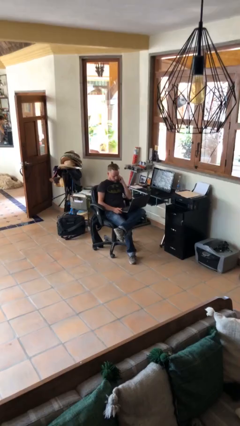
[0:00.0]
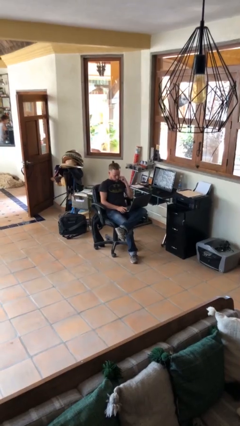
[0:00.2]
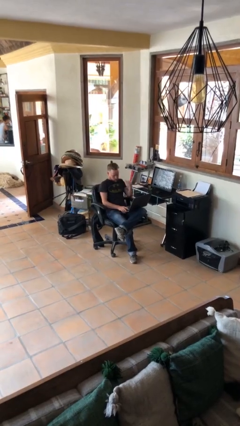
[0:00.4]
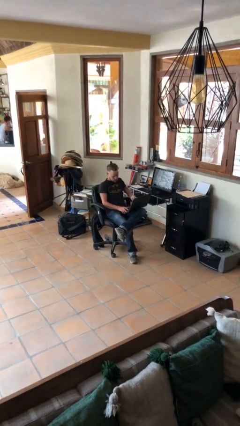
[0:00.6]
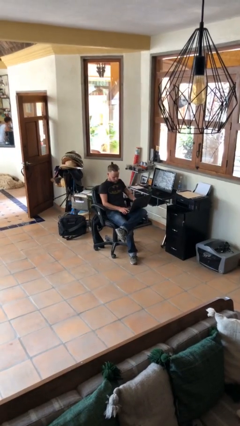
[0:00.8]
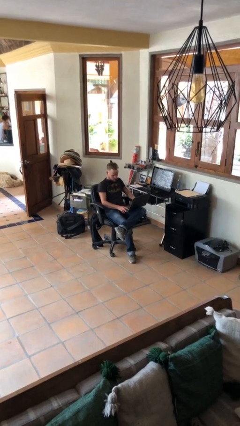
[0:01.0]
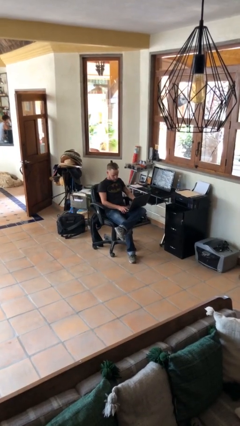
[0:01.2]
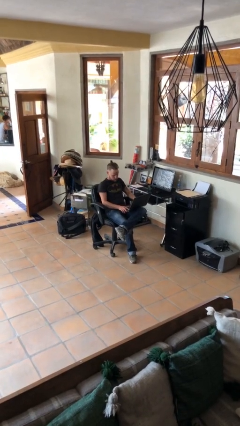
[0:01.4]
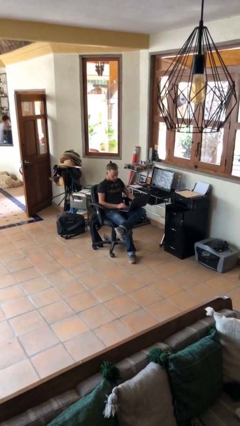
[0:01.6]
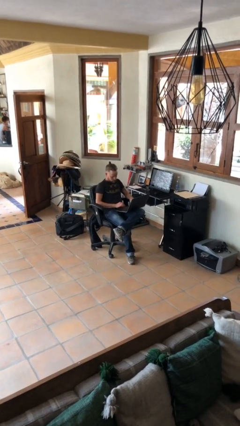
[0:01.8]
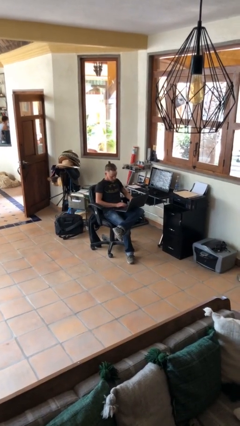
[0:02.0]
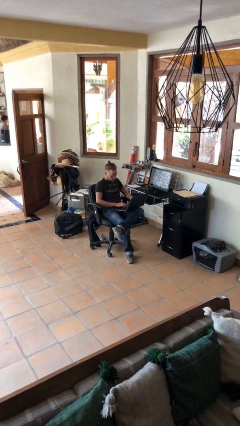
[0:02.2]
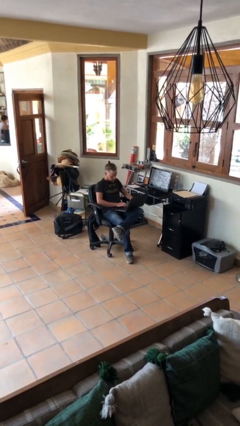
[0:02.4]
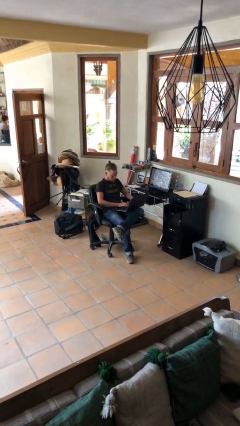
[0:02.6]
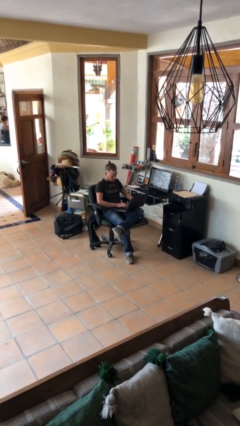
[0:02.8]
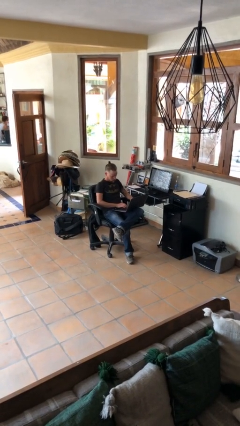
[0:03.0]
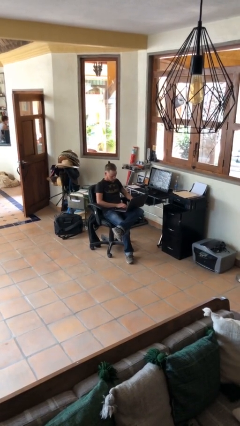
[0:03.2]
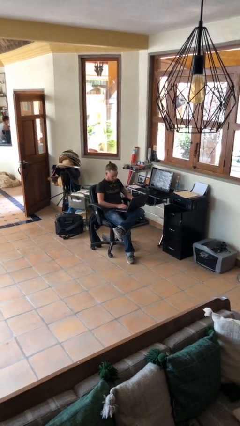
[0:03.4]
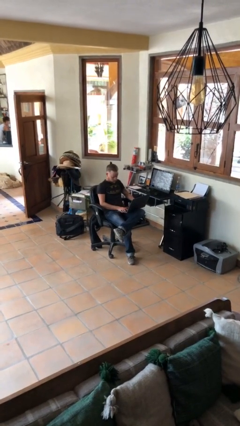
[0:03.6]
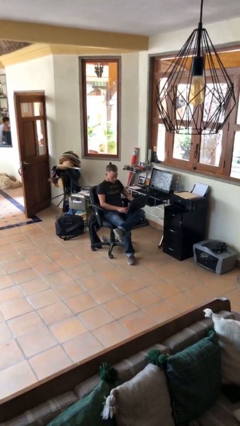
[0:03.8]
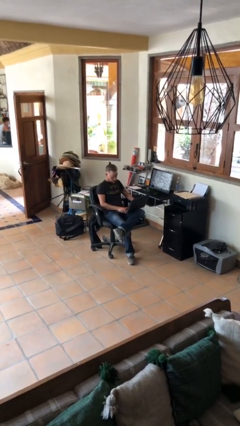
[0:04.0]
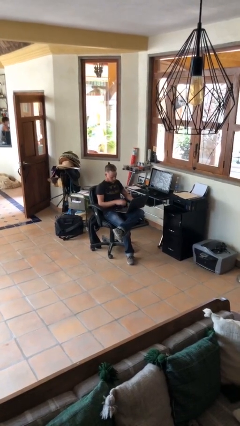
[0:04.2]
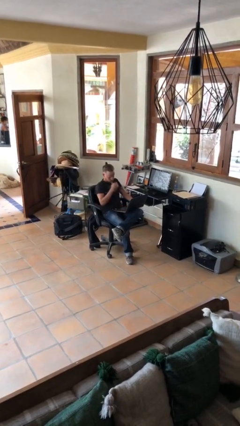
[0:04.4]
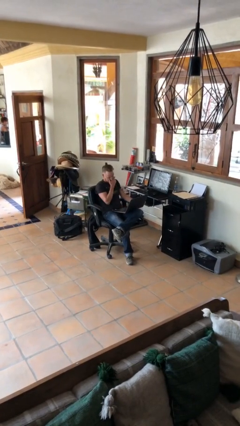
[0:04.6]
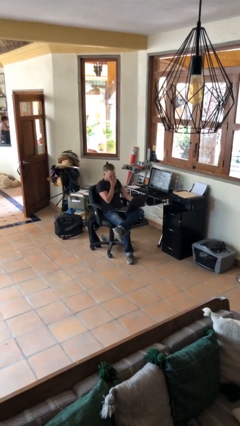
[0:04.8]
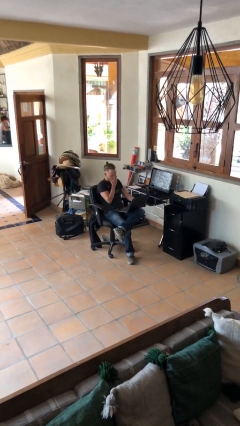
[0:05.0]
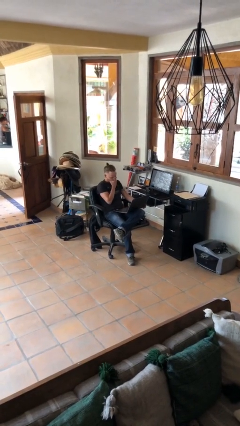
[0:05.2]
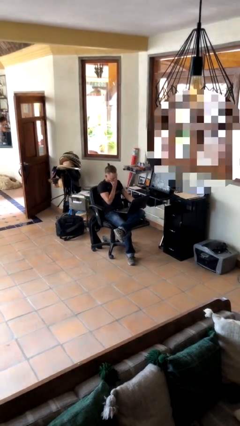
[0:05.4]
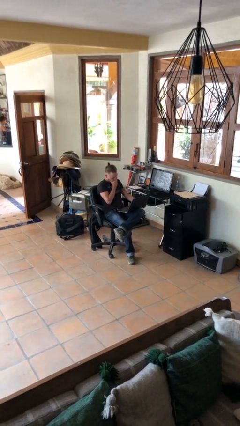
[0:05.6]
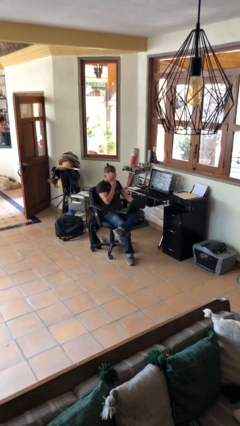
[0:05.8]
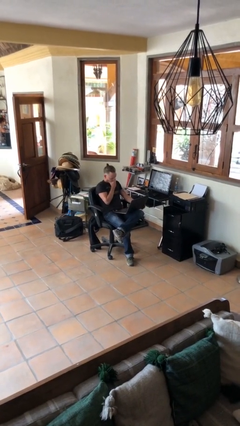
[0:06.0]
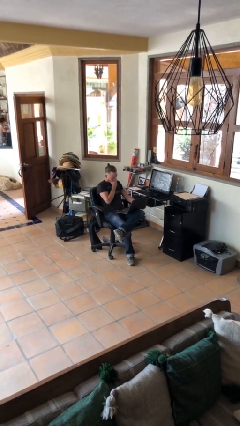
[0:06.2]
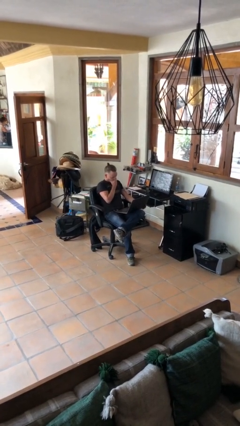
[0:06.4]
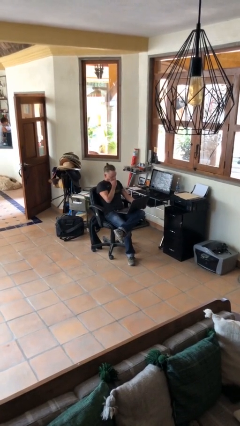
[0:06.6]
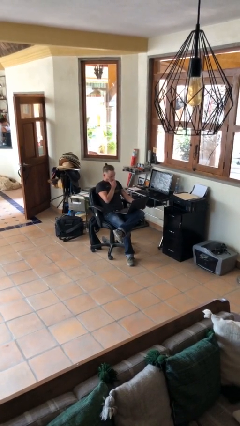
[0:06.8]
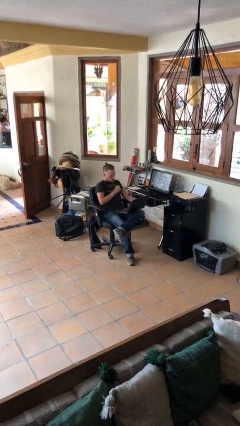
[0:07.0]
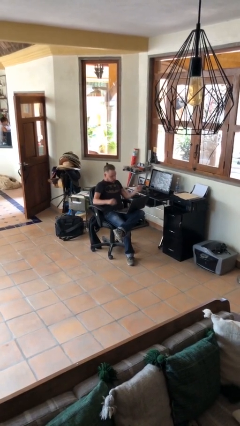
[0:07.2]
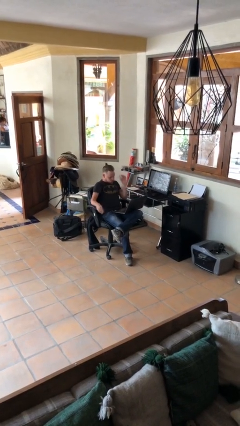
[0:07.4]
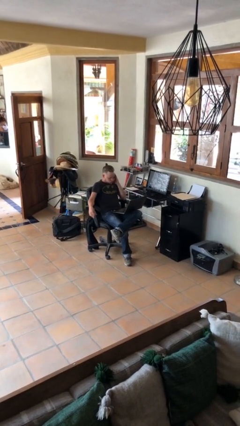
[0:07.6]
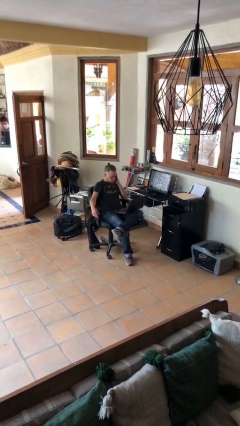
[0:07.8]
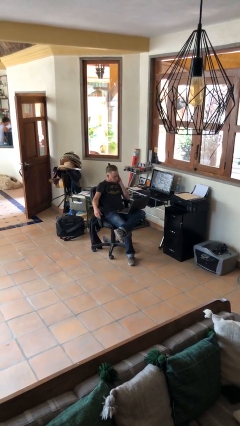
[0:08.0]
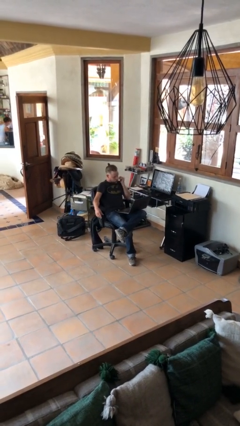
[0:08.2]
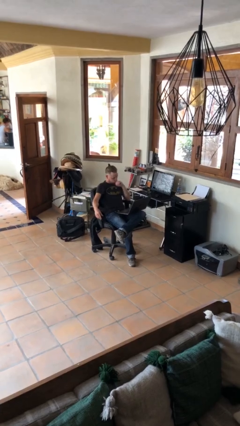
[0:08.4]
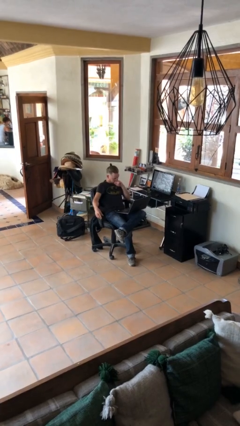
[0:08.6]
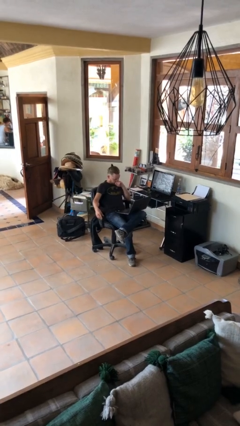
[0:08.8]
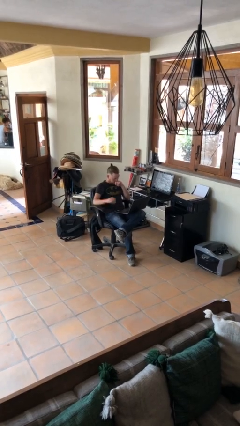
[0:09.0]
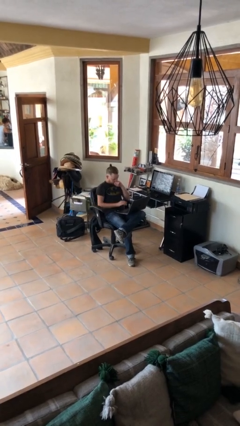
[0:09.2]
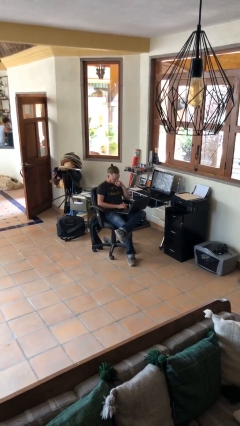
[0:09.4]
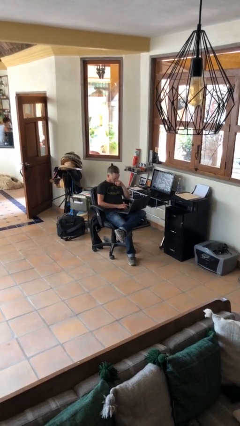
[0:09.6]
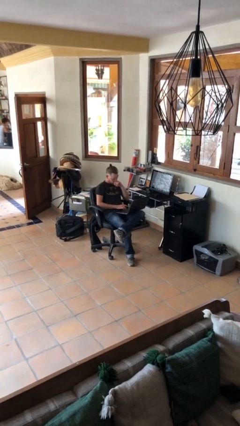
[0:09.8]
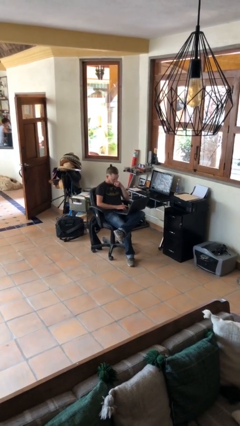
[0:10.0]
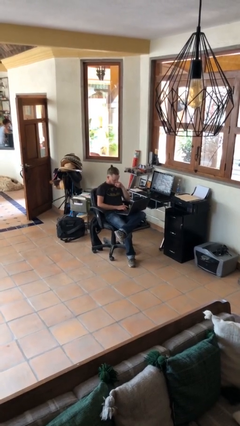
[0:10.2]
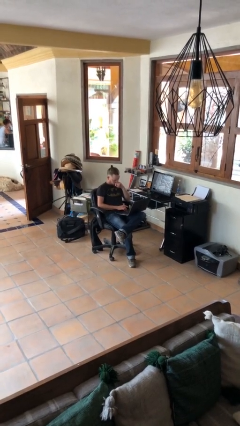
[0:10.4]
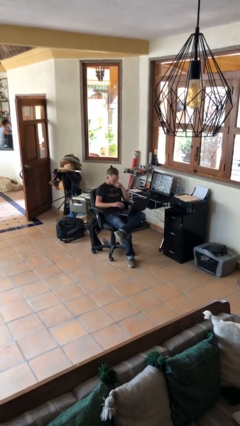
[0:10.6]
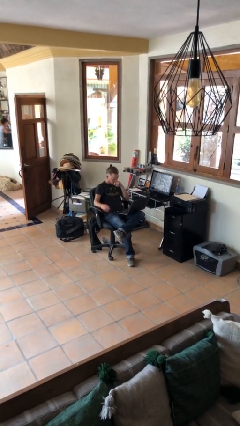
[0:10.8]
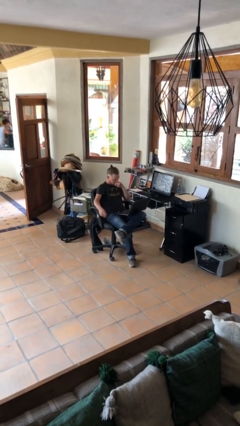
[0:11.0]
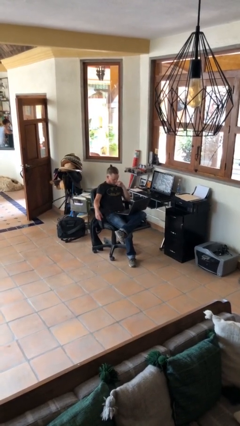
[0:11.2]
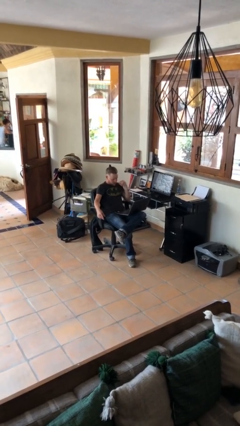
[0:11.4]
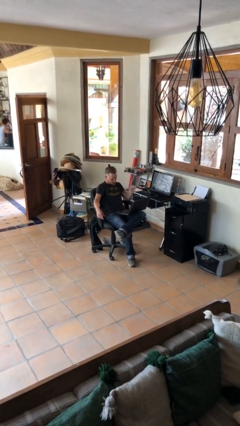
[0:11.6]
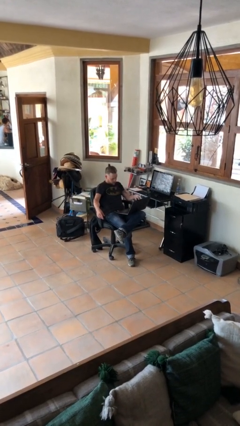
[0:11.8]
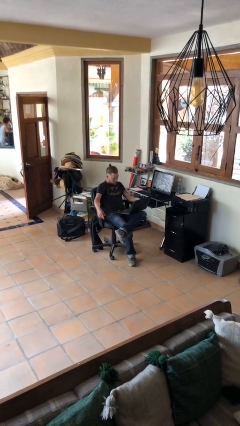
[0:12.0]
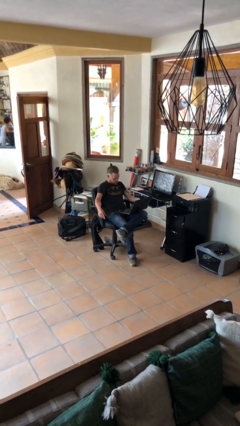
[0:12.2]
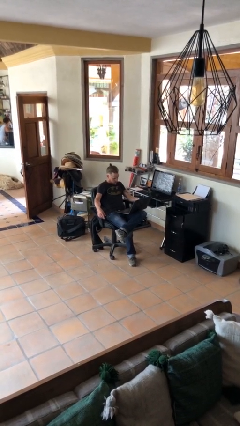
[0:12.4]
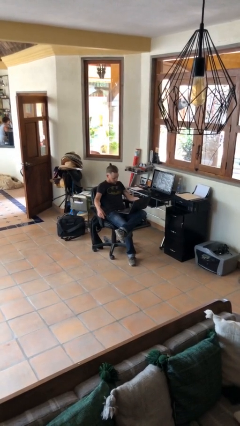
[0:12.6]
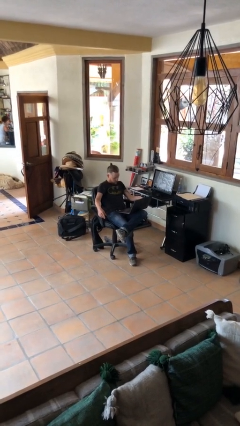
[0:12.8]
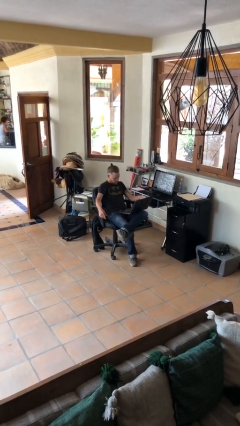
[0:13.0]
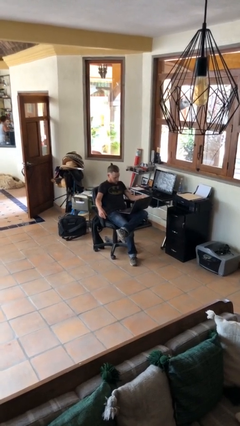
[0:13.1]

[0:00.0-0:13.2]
person interacts with laptop

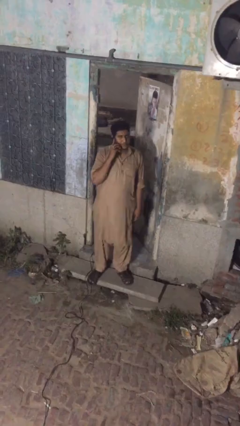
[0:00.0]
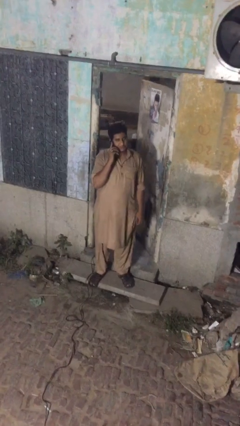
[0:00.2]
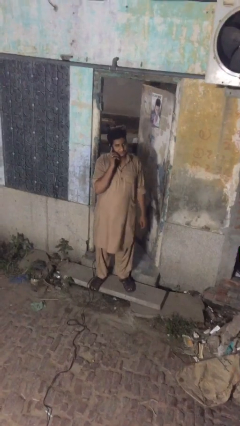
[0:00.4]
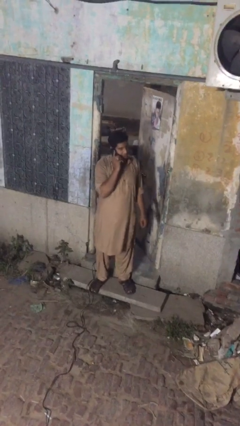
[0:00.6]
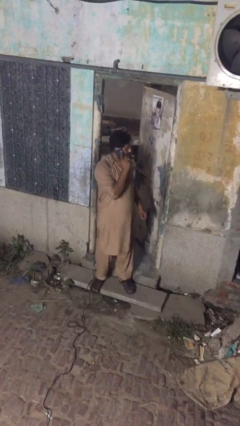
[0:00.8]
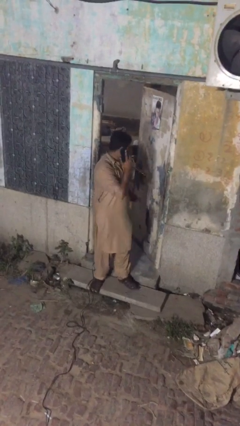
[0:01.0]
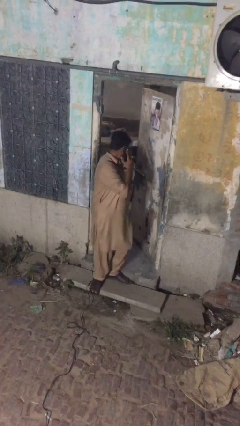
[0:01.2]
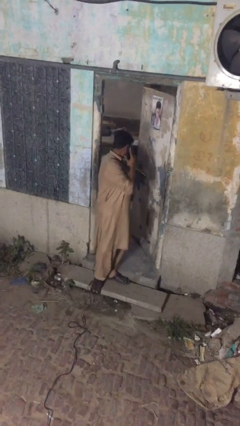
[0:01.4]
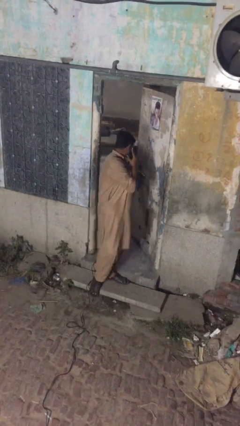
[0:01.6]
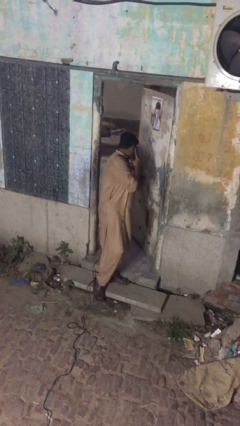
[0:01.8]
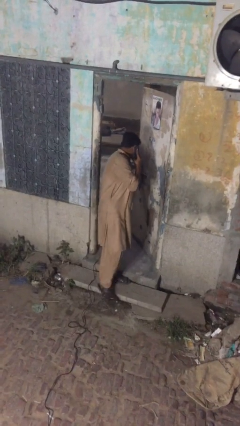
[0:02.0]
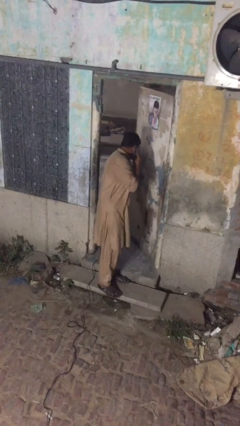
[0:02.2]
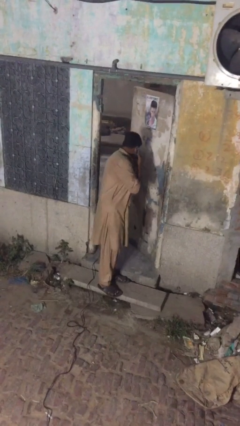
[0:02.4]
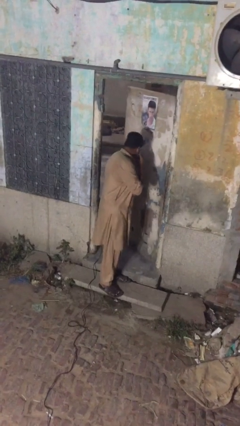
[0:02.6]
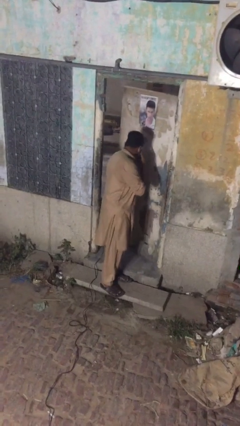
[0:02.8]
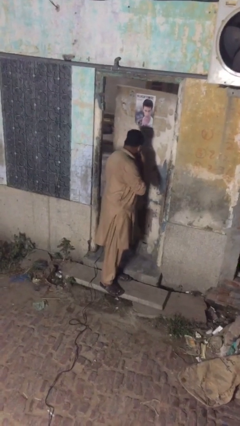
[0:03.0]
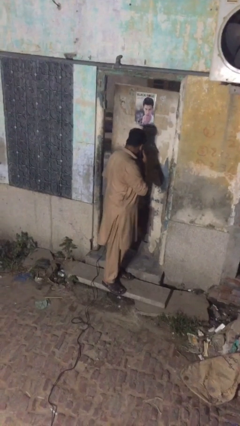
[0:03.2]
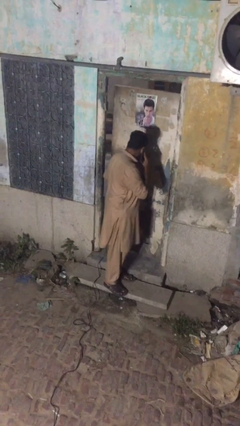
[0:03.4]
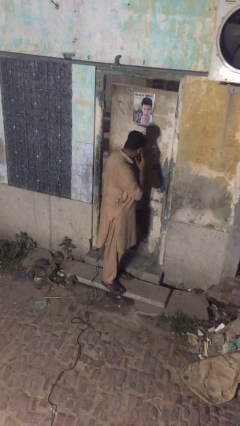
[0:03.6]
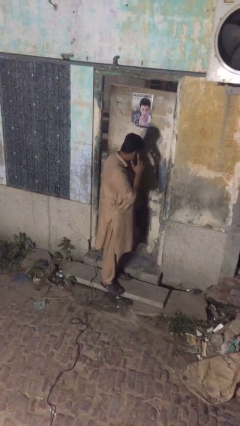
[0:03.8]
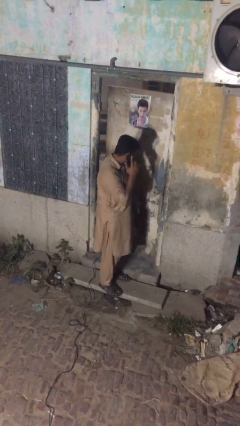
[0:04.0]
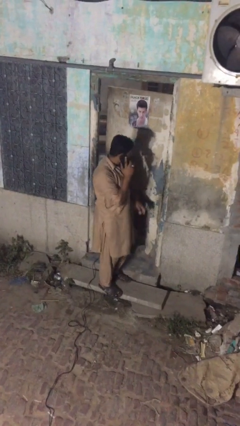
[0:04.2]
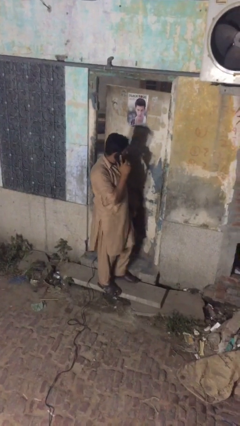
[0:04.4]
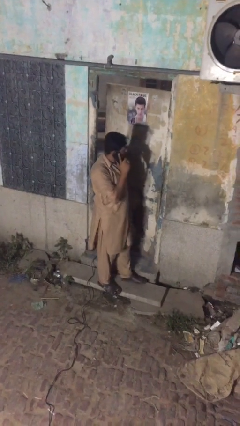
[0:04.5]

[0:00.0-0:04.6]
person closes facility door
